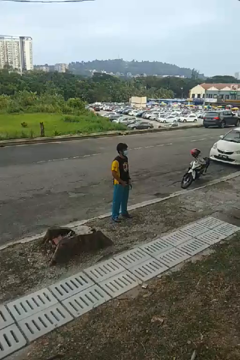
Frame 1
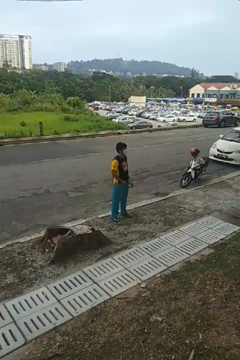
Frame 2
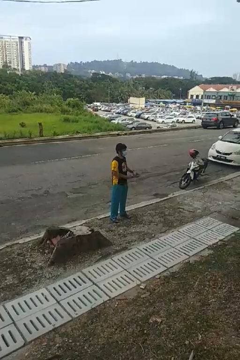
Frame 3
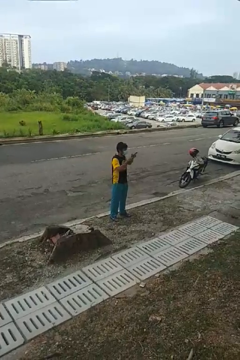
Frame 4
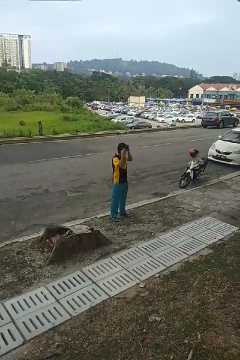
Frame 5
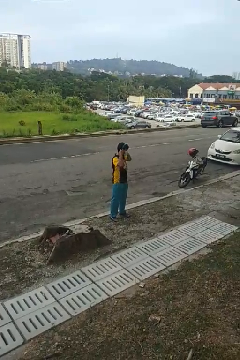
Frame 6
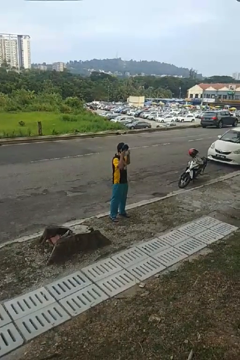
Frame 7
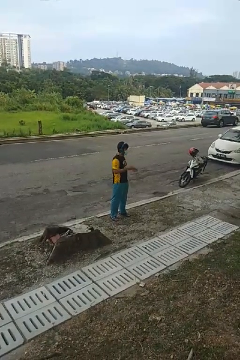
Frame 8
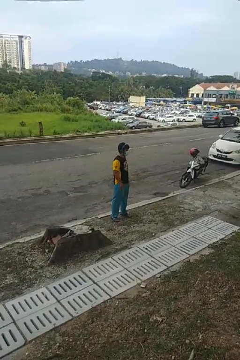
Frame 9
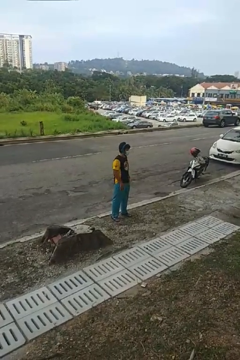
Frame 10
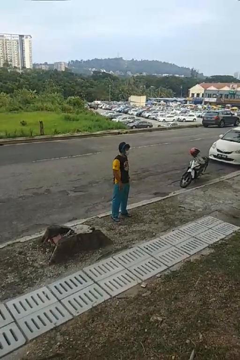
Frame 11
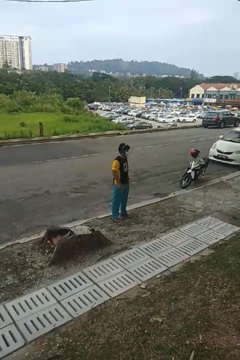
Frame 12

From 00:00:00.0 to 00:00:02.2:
person puts on headphones

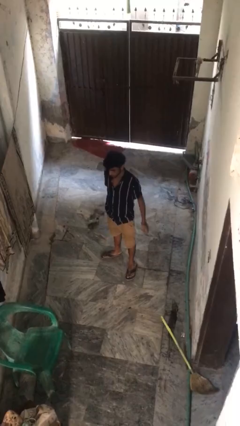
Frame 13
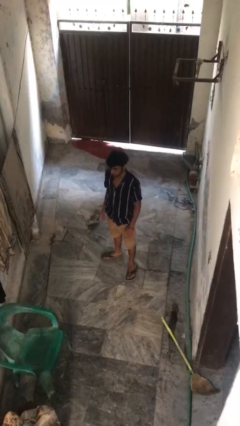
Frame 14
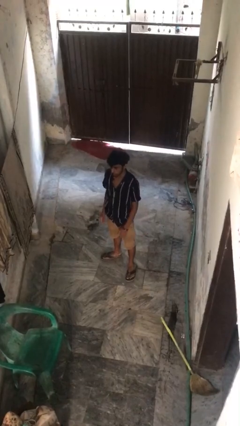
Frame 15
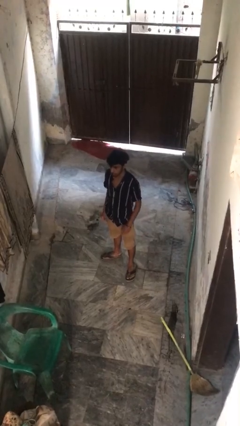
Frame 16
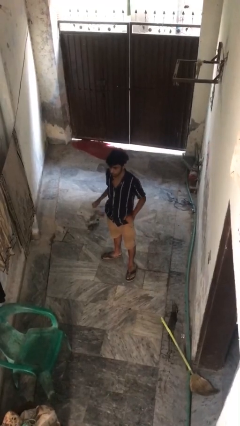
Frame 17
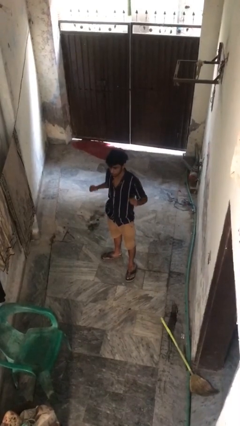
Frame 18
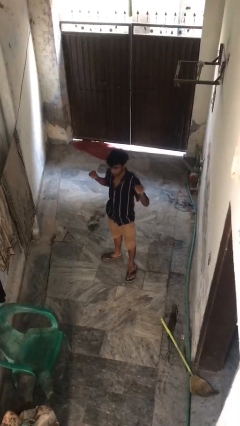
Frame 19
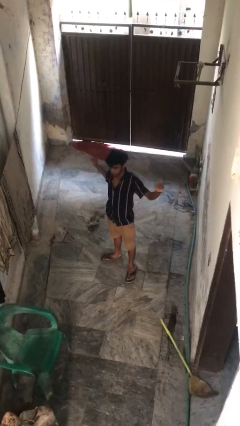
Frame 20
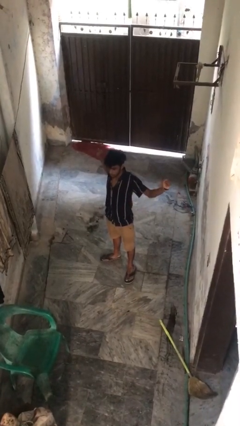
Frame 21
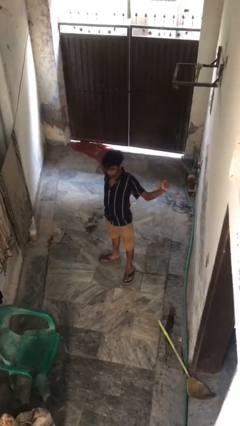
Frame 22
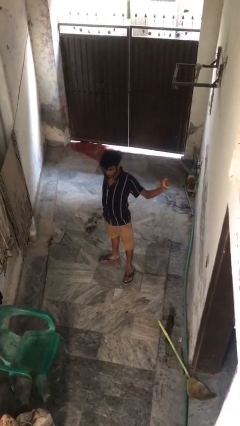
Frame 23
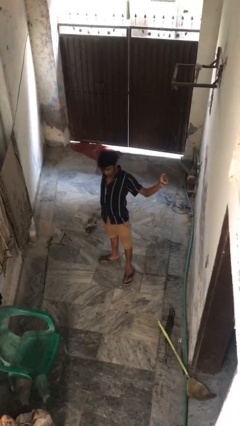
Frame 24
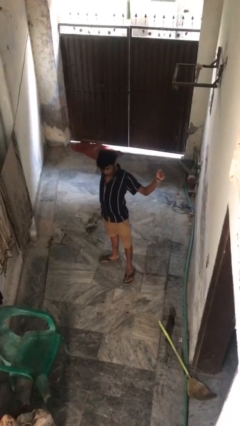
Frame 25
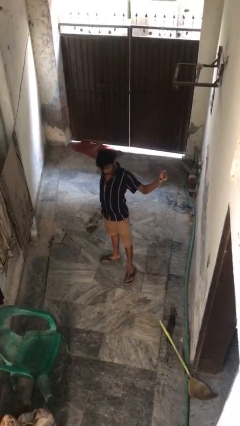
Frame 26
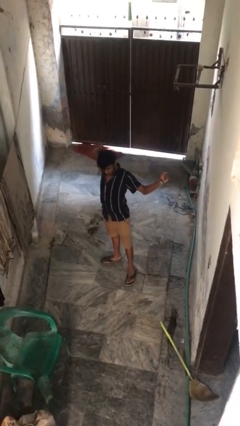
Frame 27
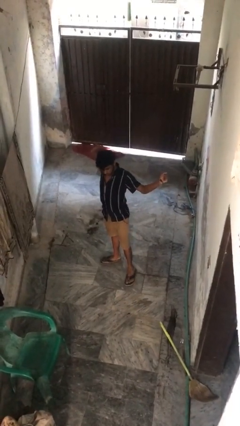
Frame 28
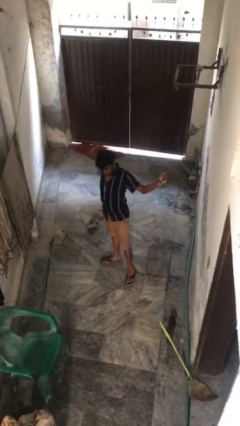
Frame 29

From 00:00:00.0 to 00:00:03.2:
person stretches arms to side

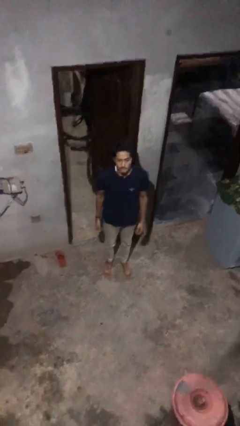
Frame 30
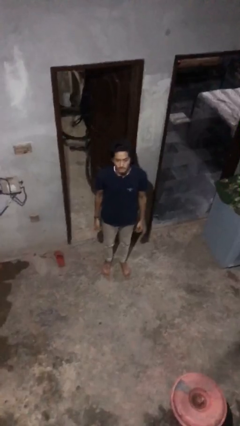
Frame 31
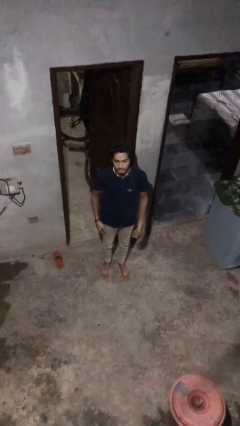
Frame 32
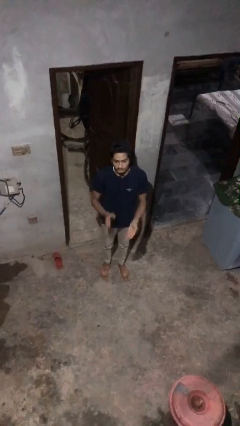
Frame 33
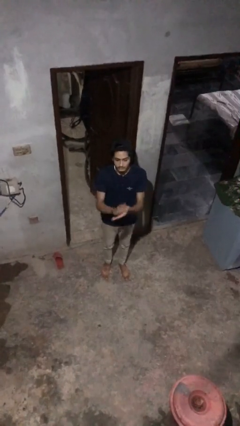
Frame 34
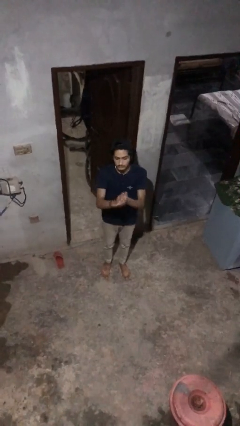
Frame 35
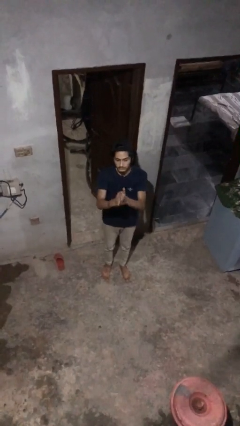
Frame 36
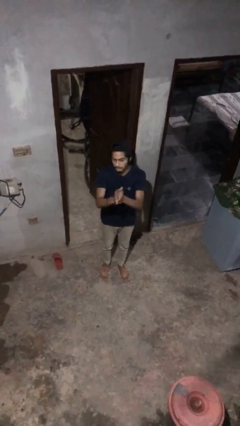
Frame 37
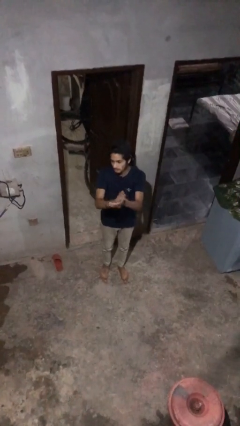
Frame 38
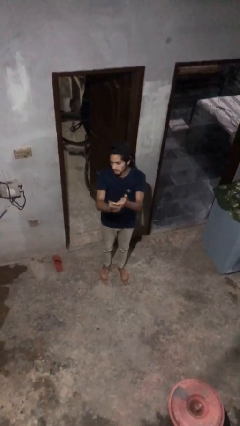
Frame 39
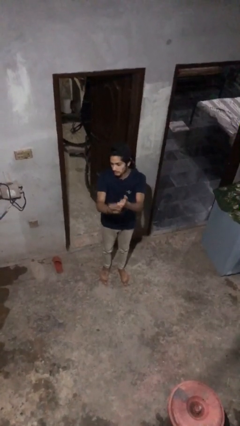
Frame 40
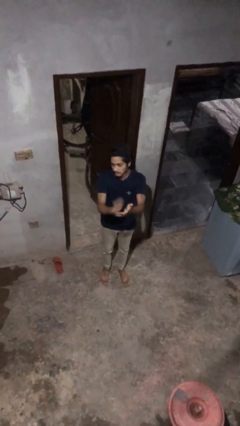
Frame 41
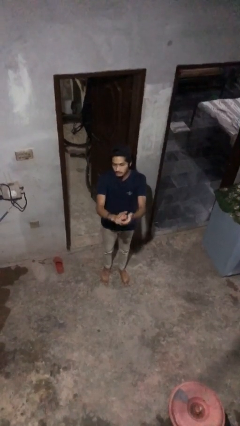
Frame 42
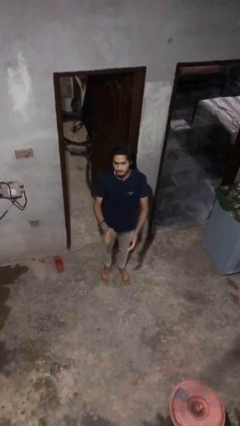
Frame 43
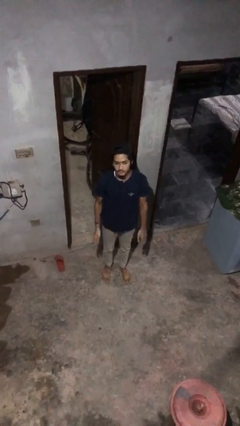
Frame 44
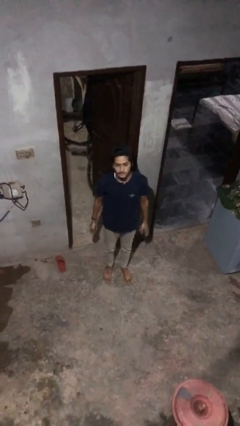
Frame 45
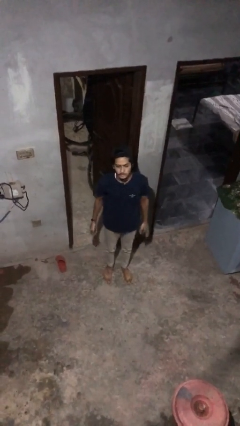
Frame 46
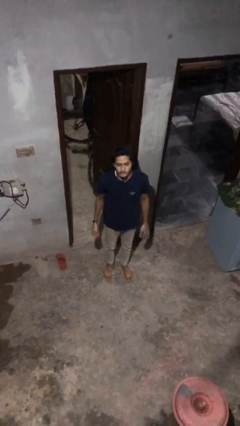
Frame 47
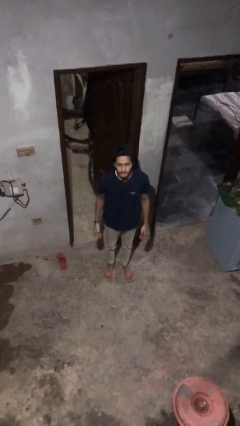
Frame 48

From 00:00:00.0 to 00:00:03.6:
person claps hands

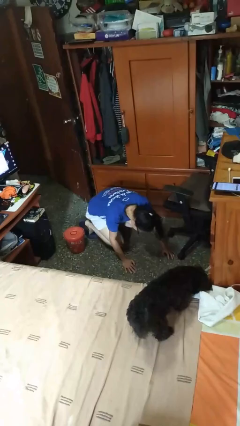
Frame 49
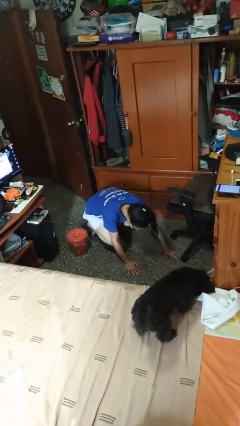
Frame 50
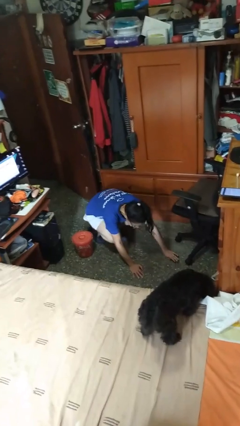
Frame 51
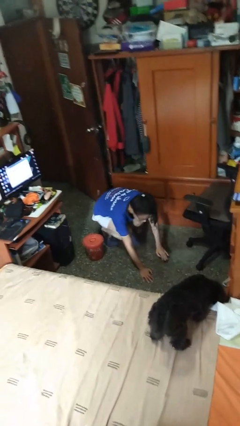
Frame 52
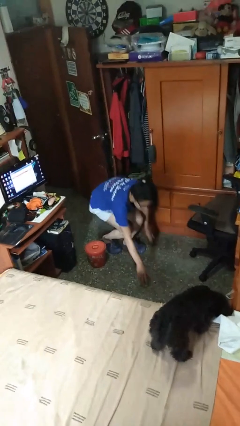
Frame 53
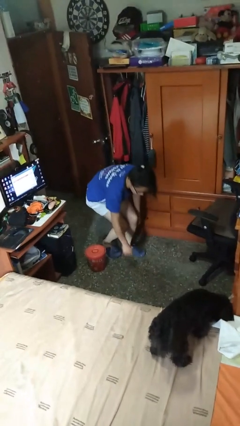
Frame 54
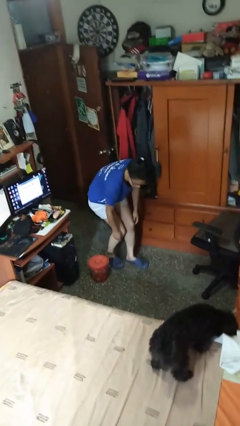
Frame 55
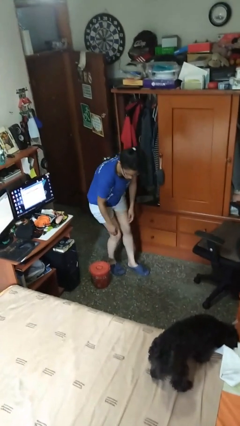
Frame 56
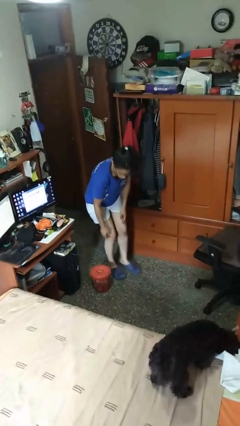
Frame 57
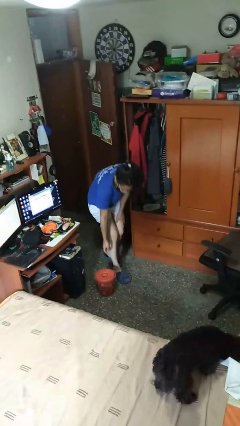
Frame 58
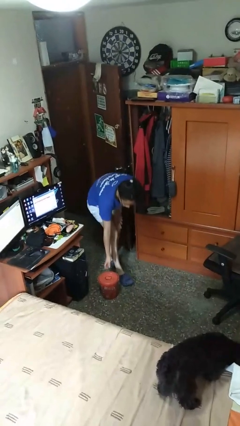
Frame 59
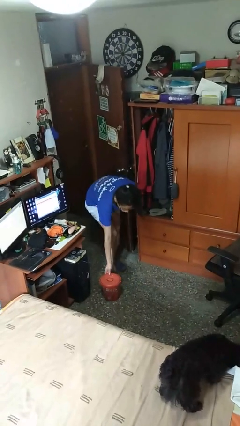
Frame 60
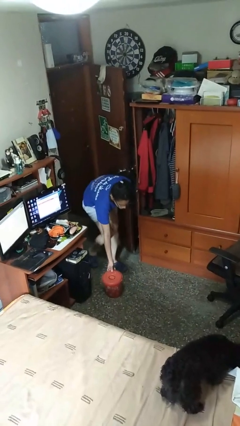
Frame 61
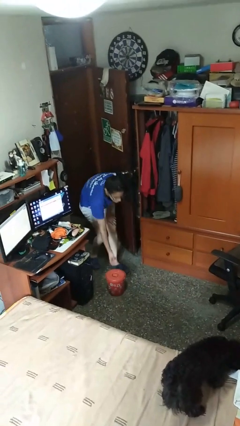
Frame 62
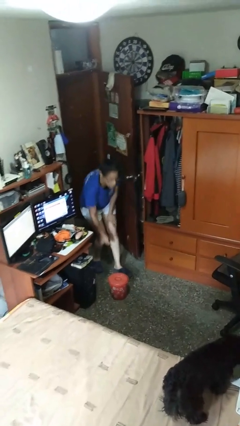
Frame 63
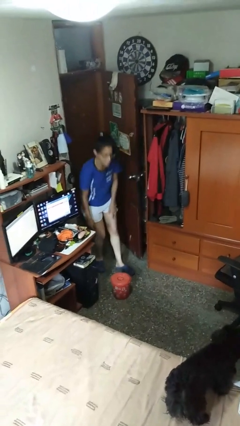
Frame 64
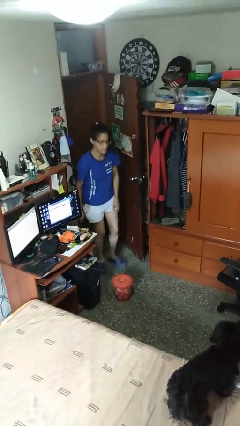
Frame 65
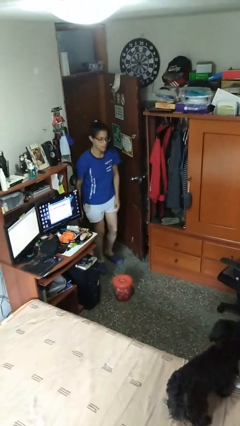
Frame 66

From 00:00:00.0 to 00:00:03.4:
person stands up from floor

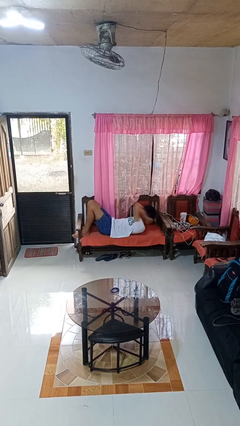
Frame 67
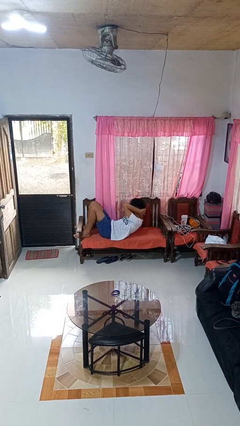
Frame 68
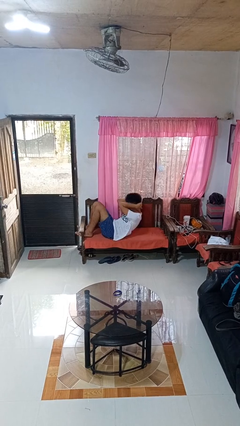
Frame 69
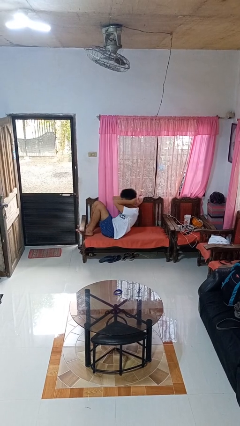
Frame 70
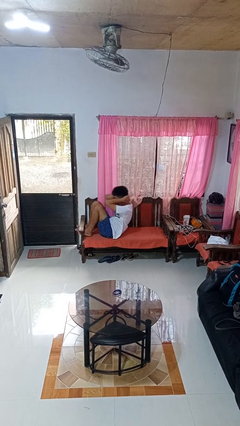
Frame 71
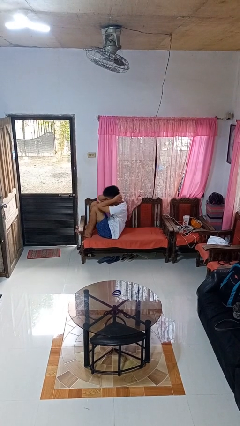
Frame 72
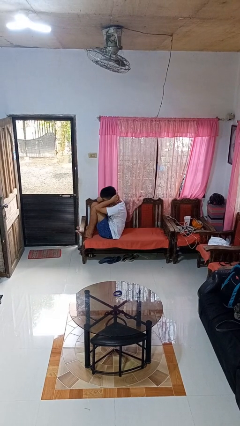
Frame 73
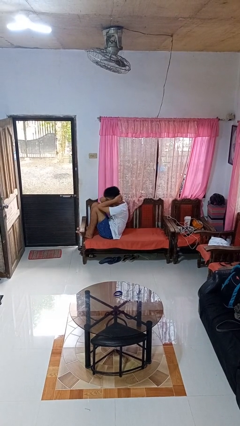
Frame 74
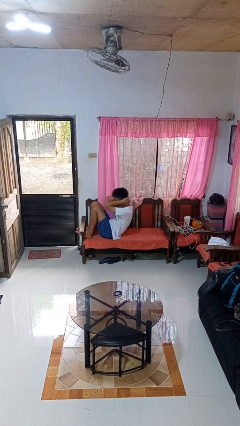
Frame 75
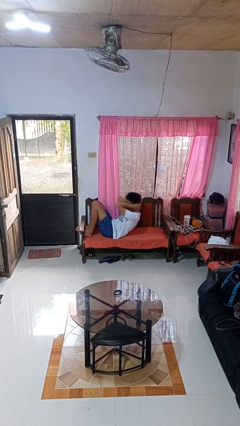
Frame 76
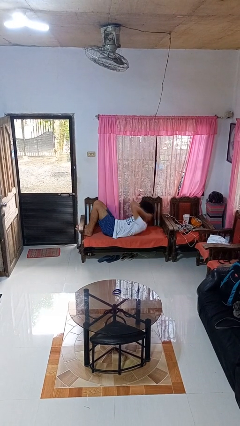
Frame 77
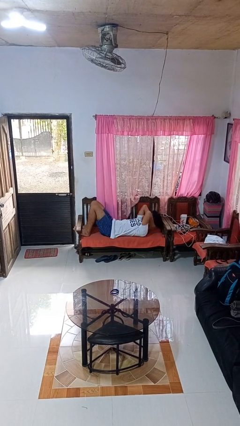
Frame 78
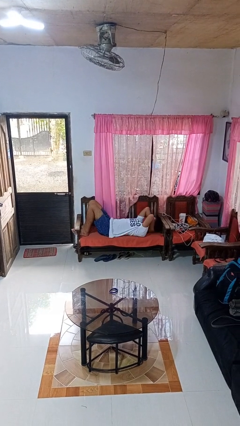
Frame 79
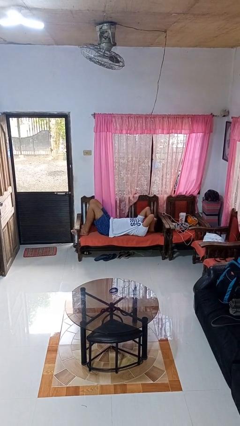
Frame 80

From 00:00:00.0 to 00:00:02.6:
person exercises with situp

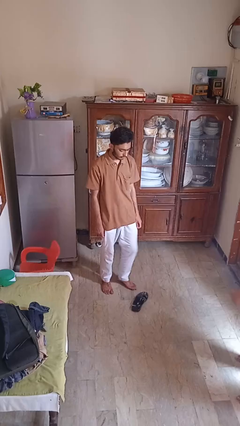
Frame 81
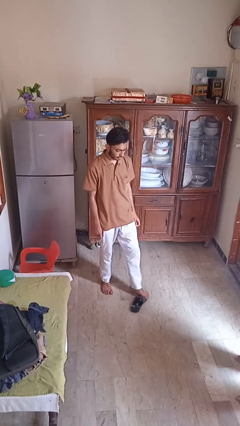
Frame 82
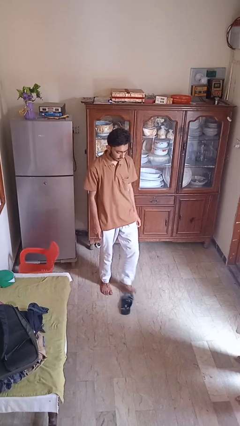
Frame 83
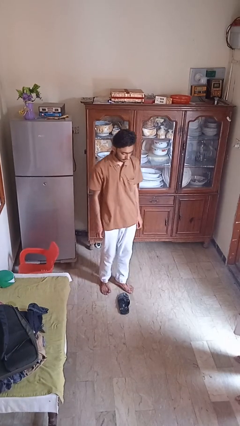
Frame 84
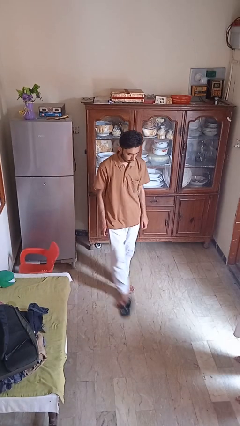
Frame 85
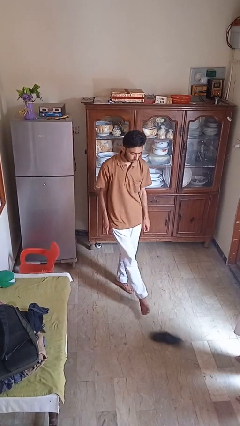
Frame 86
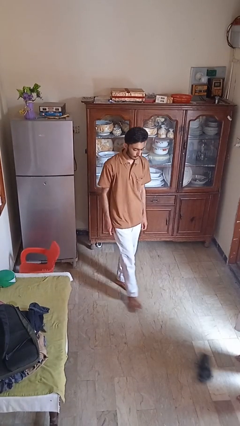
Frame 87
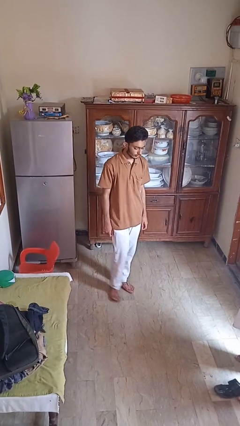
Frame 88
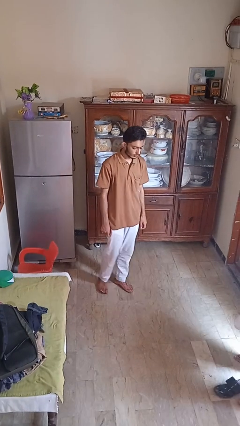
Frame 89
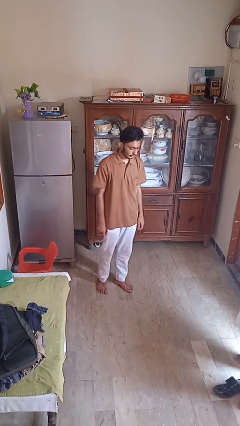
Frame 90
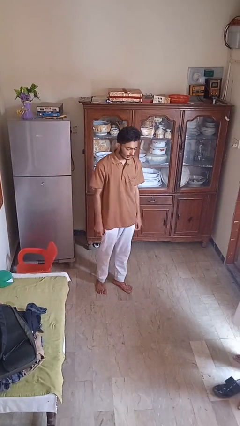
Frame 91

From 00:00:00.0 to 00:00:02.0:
person kicks object to person

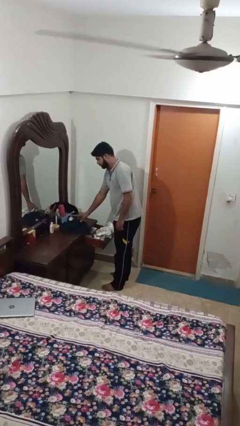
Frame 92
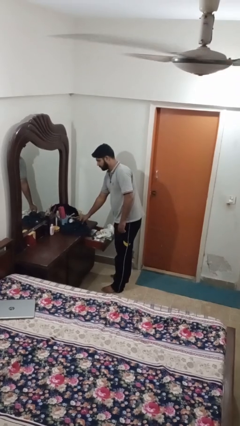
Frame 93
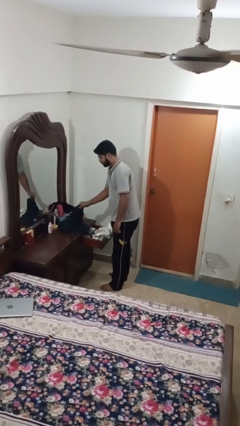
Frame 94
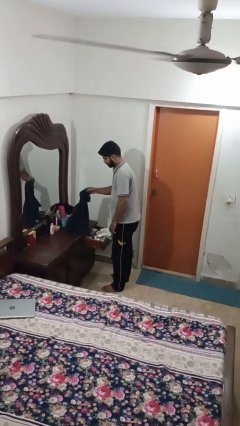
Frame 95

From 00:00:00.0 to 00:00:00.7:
person takes clothes from dresser
